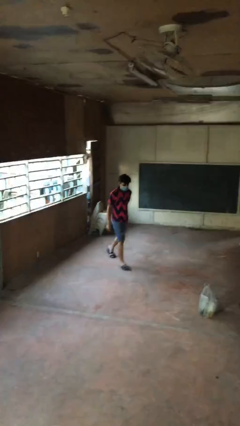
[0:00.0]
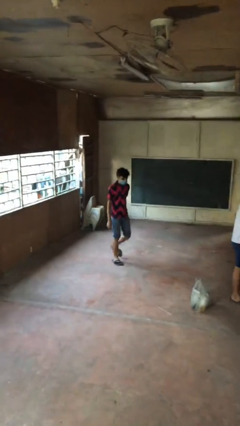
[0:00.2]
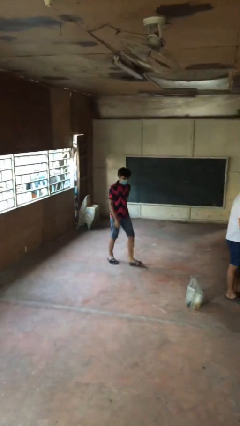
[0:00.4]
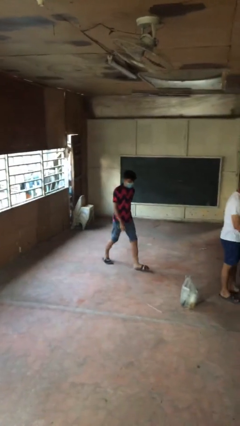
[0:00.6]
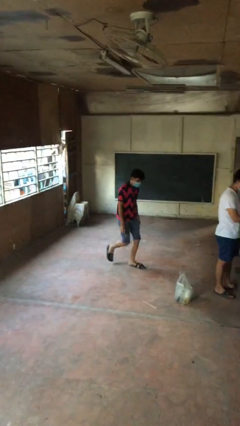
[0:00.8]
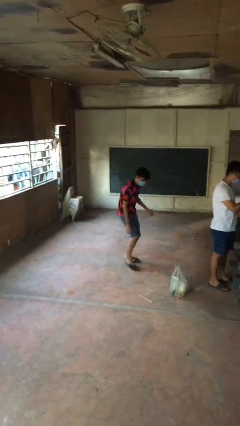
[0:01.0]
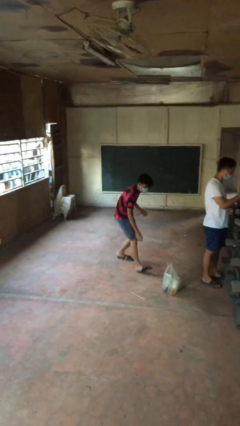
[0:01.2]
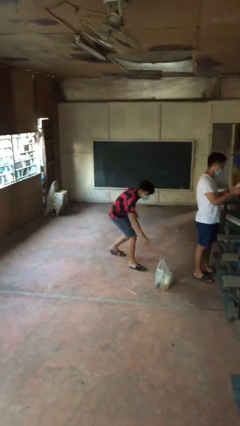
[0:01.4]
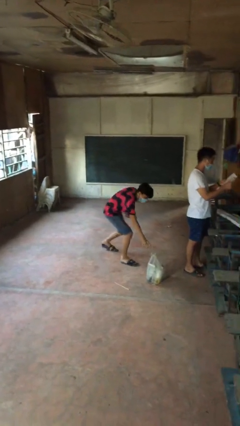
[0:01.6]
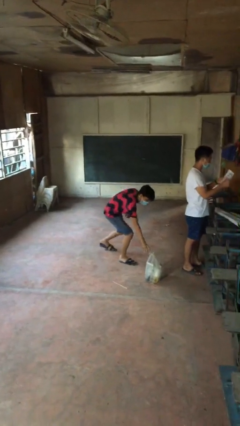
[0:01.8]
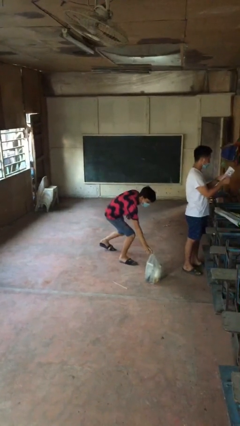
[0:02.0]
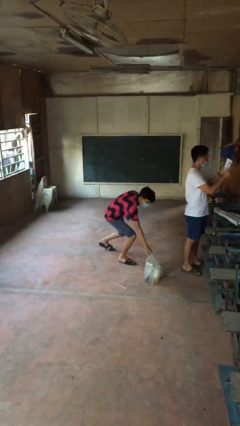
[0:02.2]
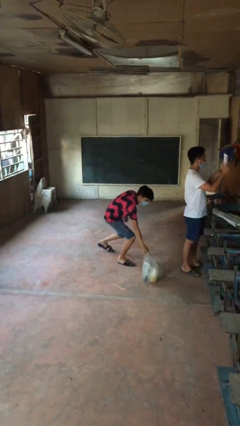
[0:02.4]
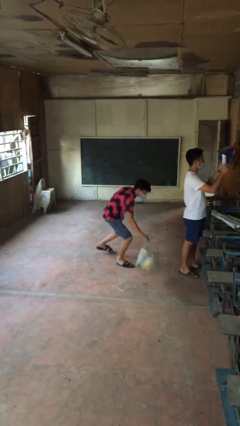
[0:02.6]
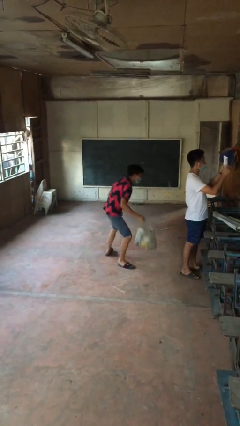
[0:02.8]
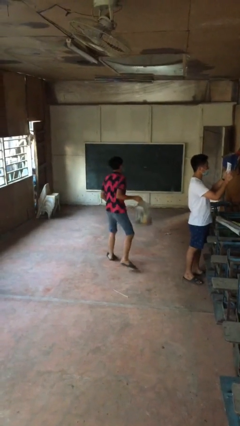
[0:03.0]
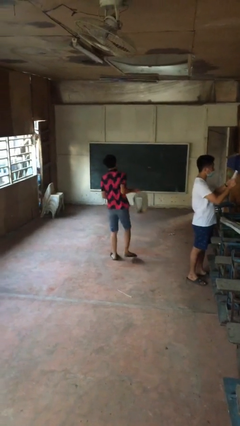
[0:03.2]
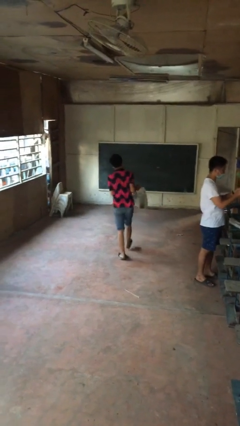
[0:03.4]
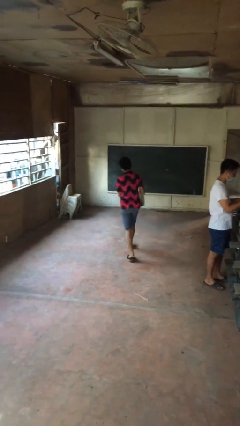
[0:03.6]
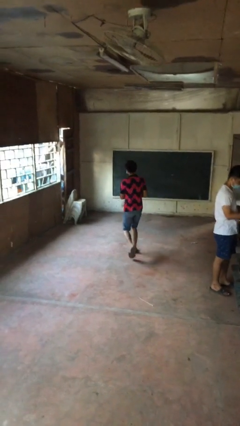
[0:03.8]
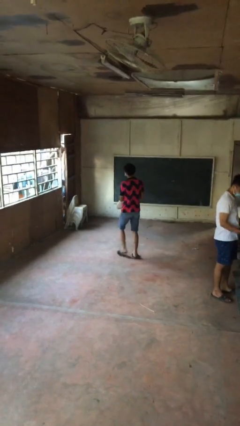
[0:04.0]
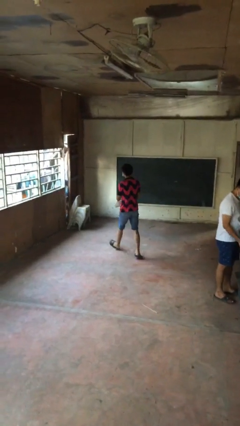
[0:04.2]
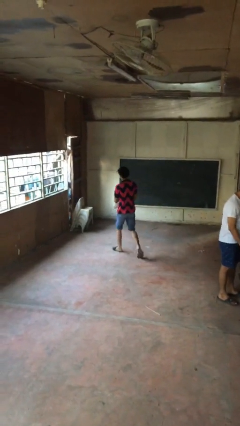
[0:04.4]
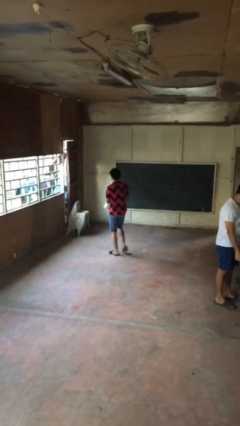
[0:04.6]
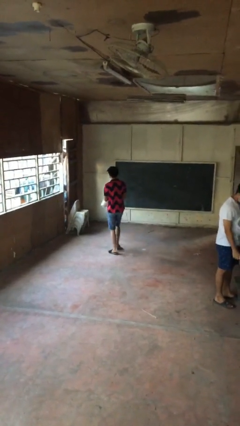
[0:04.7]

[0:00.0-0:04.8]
person steals object from person

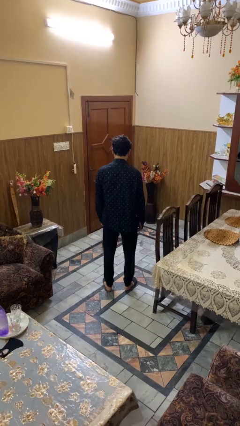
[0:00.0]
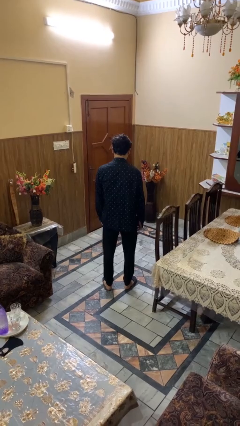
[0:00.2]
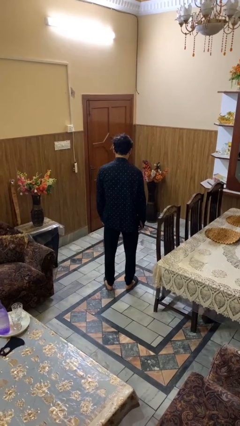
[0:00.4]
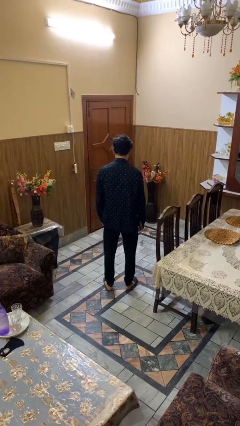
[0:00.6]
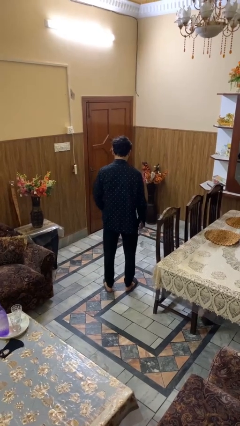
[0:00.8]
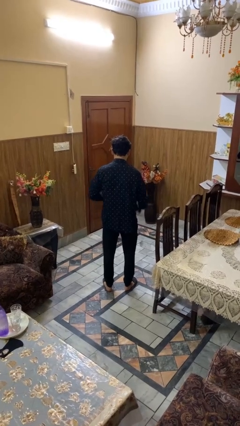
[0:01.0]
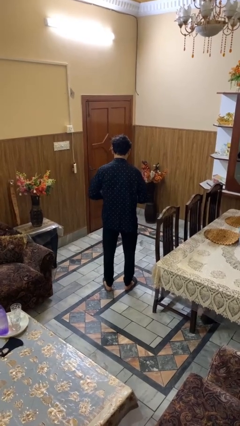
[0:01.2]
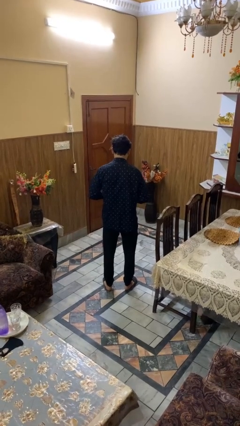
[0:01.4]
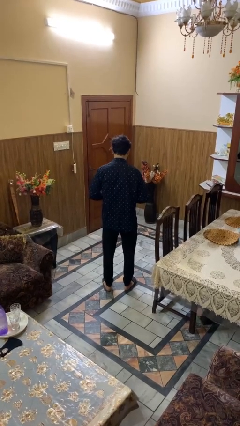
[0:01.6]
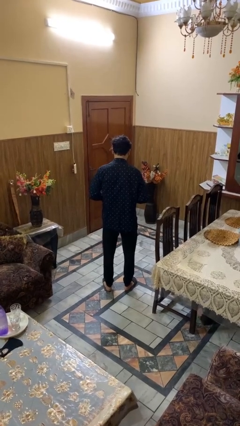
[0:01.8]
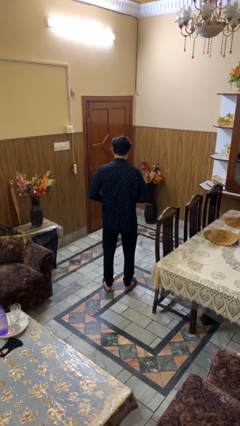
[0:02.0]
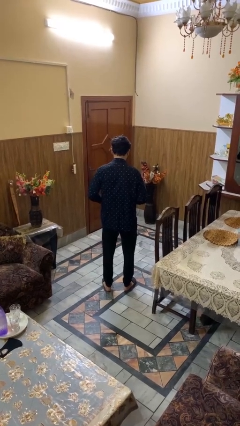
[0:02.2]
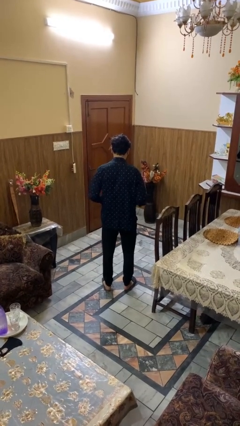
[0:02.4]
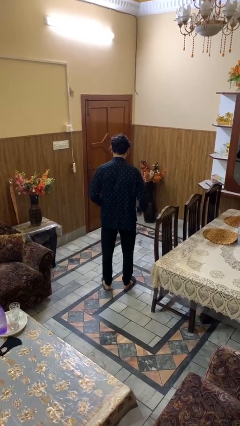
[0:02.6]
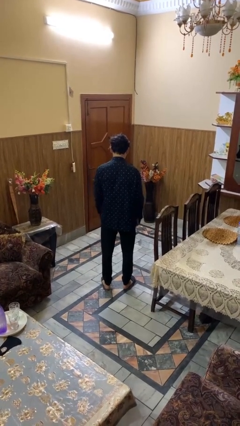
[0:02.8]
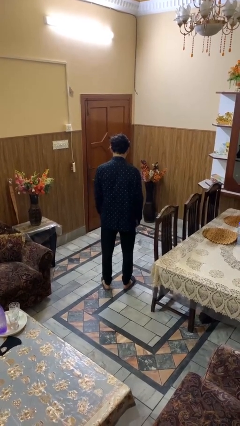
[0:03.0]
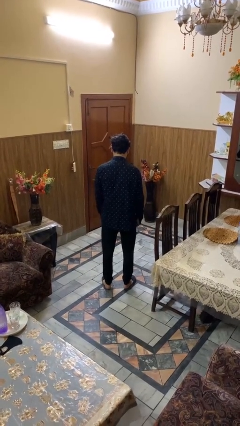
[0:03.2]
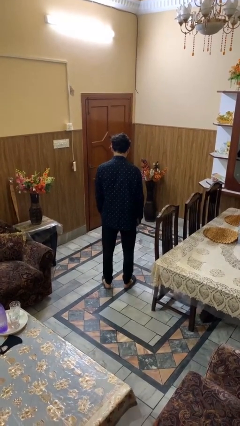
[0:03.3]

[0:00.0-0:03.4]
person unbuttons shirt

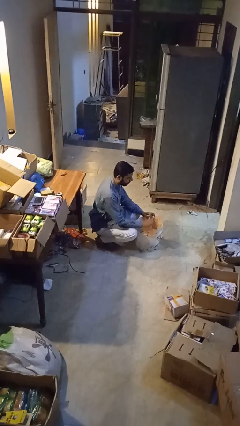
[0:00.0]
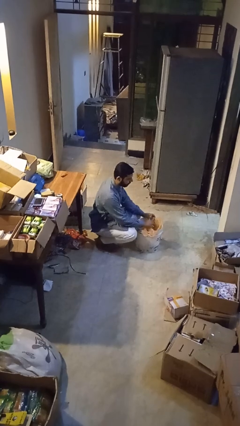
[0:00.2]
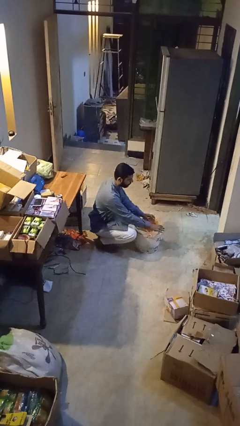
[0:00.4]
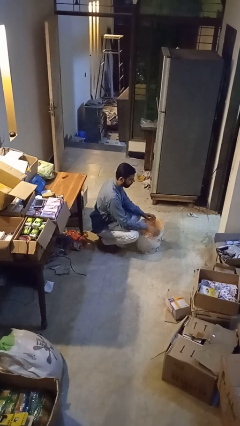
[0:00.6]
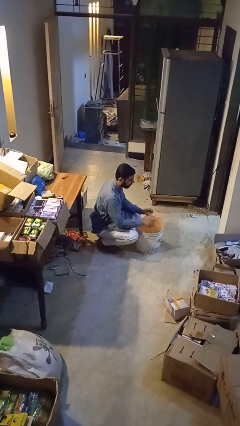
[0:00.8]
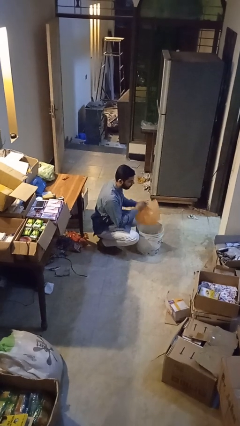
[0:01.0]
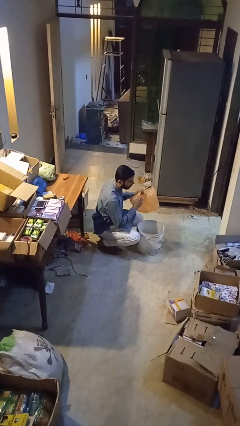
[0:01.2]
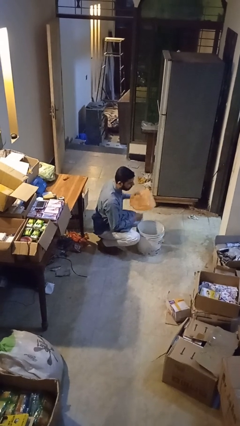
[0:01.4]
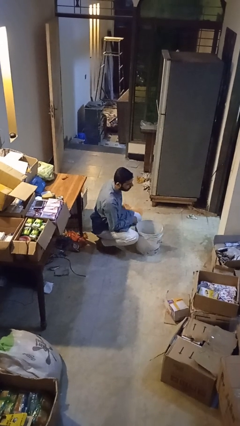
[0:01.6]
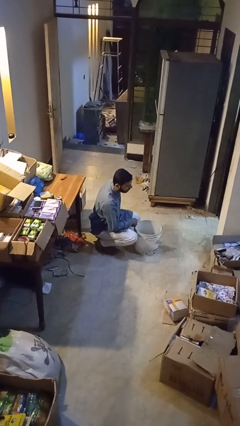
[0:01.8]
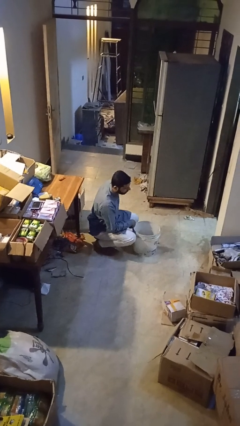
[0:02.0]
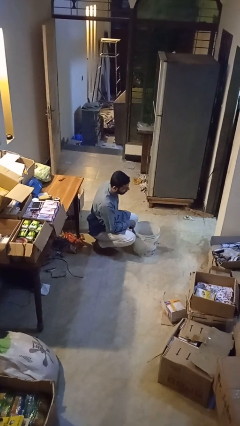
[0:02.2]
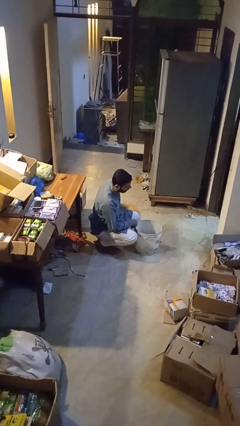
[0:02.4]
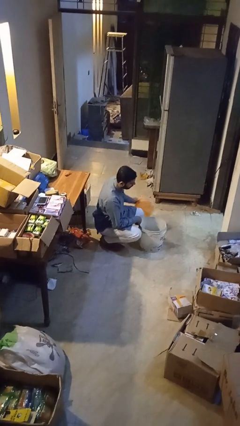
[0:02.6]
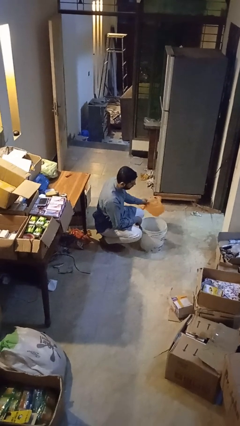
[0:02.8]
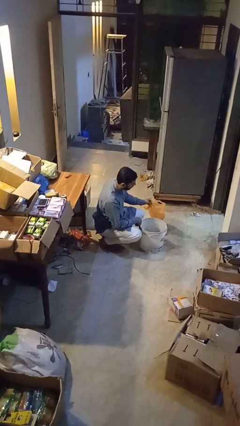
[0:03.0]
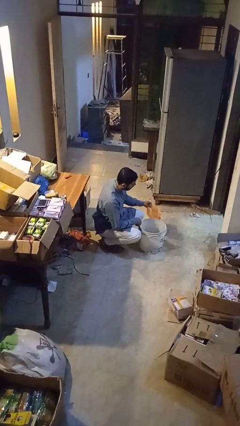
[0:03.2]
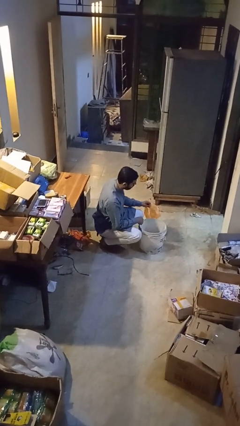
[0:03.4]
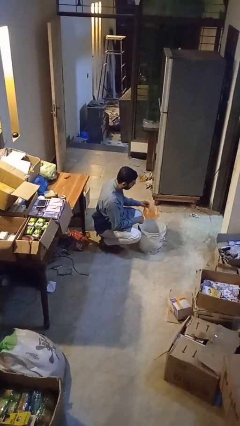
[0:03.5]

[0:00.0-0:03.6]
person removes trashbag from trashcan

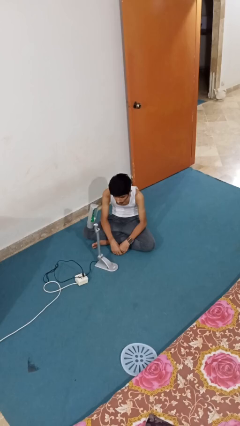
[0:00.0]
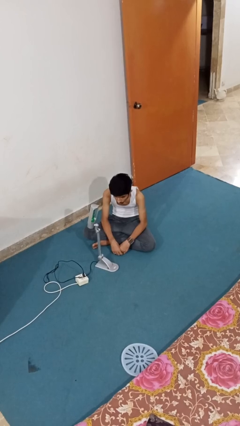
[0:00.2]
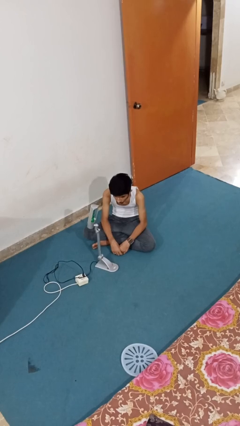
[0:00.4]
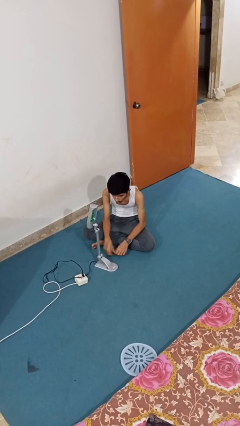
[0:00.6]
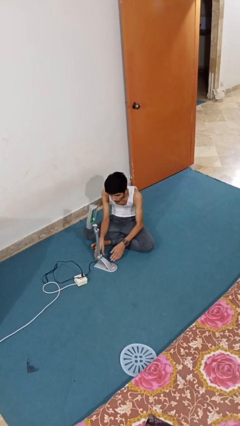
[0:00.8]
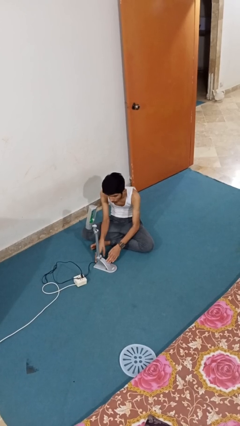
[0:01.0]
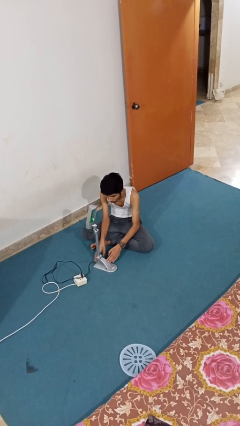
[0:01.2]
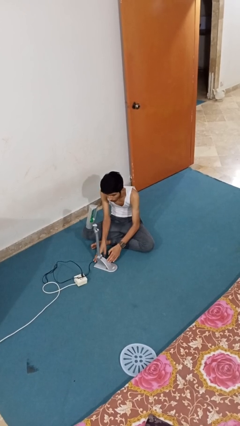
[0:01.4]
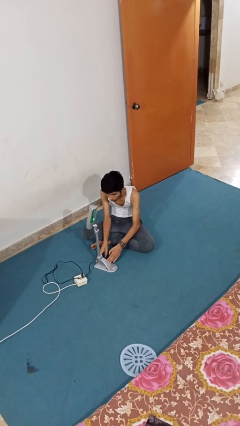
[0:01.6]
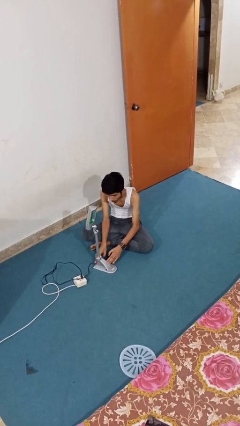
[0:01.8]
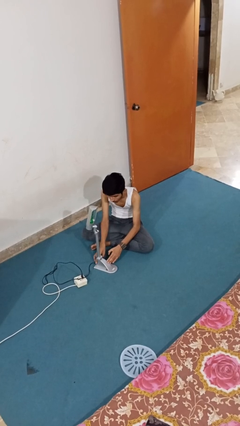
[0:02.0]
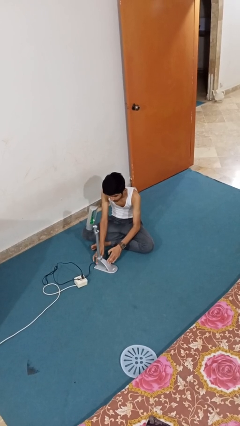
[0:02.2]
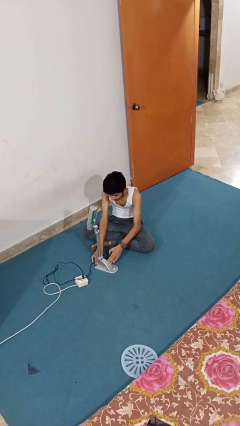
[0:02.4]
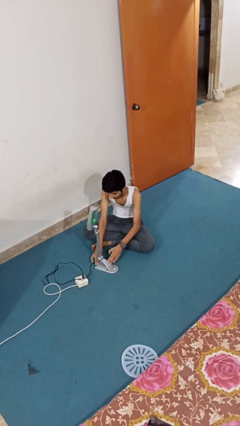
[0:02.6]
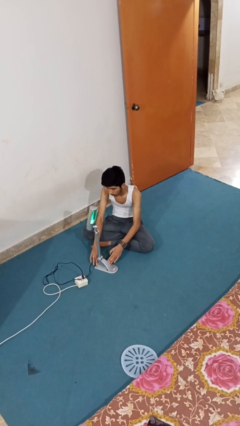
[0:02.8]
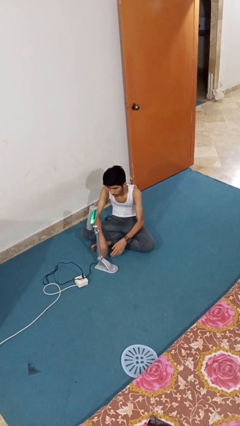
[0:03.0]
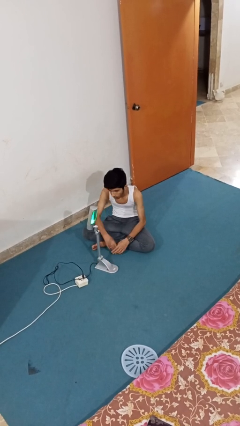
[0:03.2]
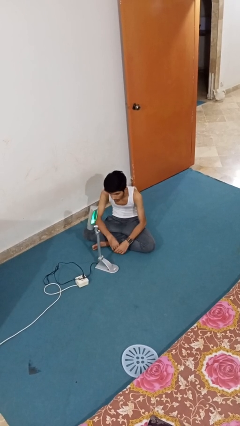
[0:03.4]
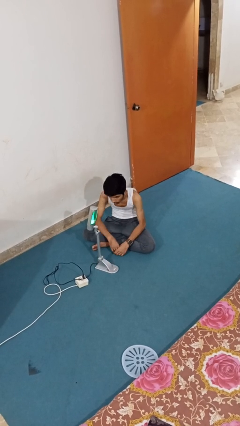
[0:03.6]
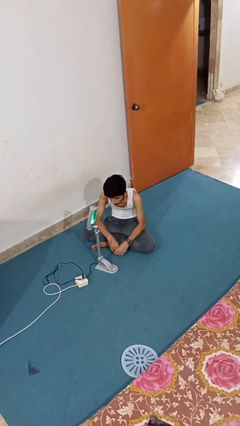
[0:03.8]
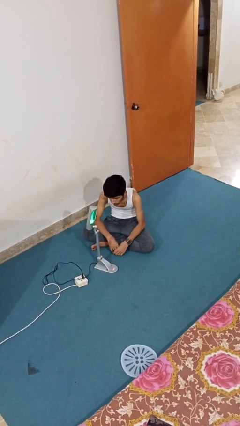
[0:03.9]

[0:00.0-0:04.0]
person turns on lamp

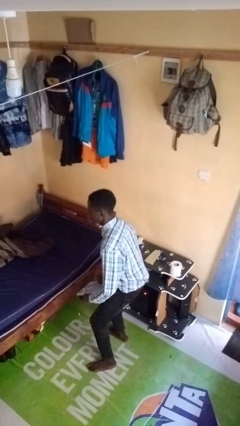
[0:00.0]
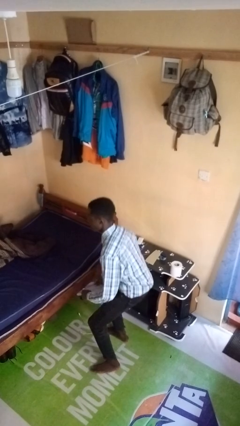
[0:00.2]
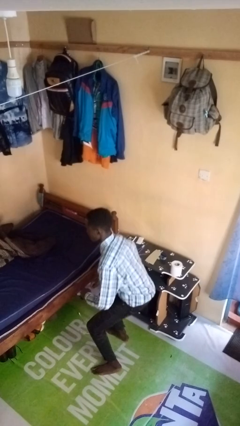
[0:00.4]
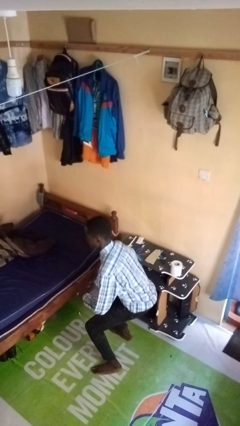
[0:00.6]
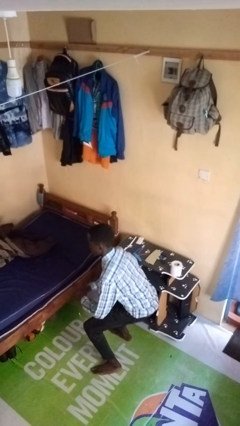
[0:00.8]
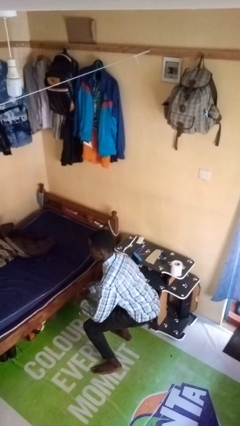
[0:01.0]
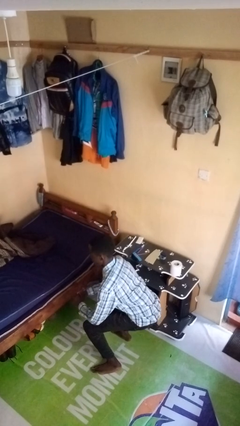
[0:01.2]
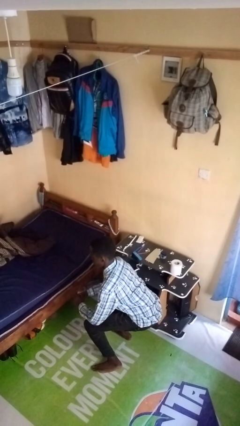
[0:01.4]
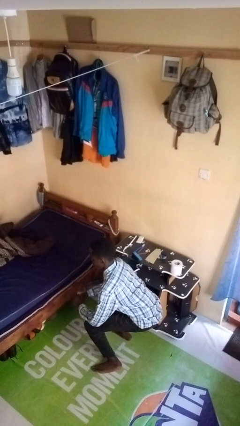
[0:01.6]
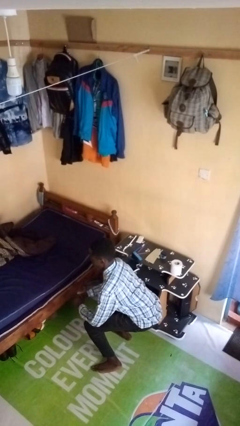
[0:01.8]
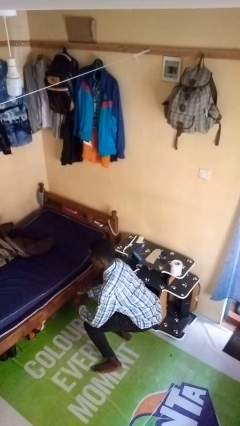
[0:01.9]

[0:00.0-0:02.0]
person squats
